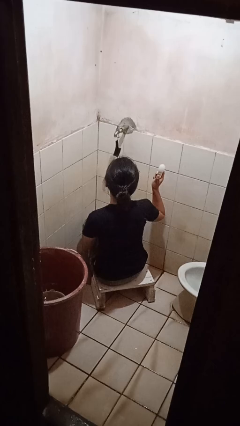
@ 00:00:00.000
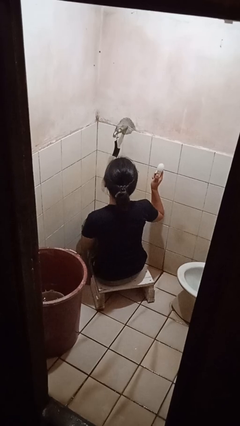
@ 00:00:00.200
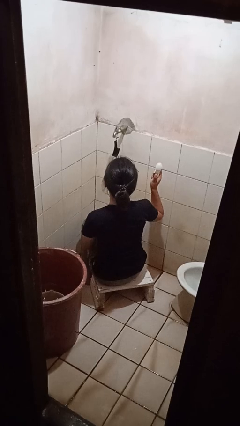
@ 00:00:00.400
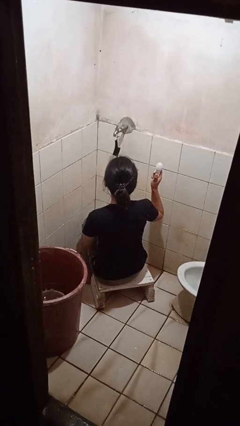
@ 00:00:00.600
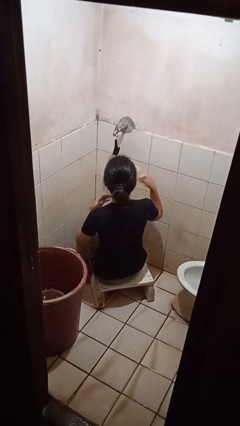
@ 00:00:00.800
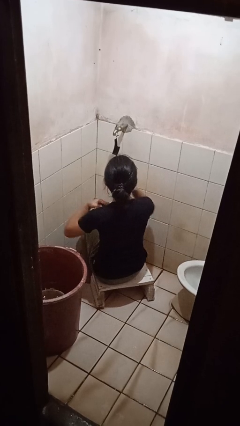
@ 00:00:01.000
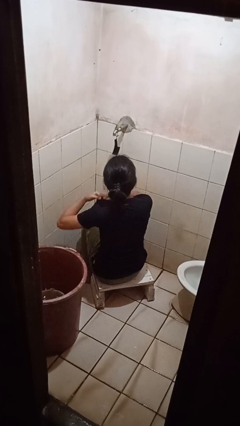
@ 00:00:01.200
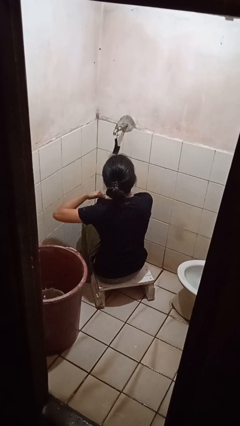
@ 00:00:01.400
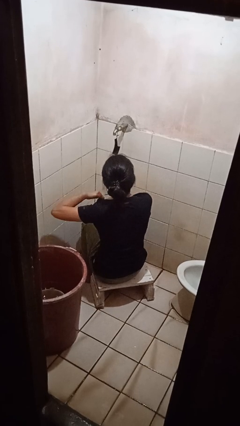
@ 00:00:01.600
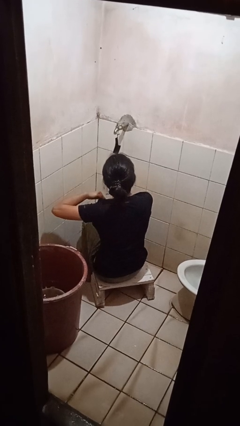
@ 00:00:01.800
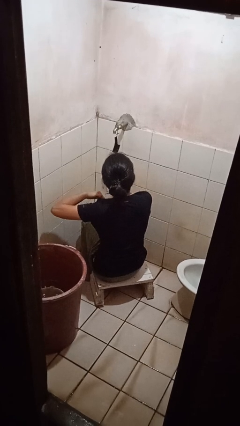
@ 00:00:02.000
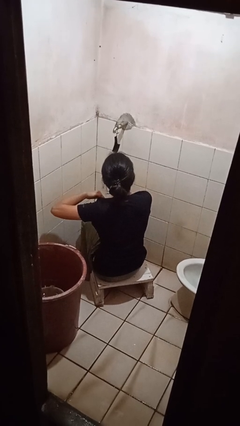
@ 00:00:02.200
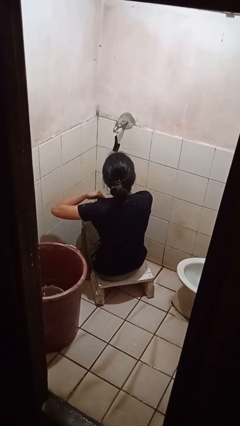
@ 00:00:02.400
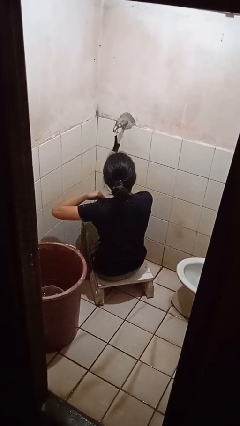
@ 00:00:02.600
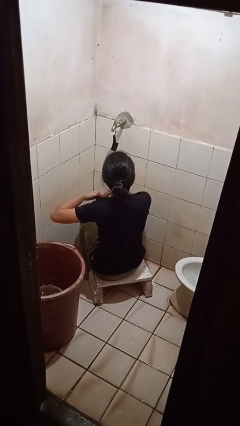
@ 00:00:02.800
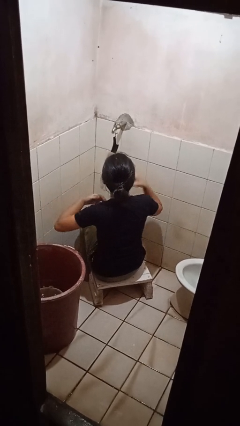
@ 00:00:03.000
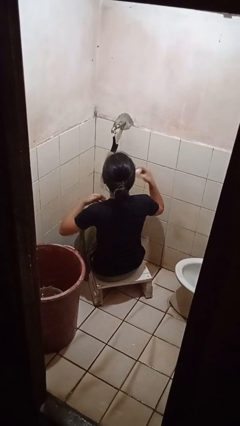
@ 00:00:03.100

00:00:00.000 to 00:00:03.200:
person applies deodorant

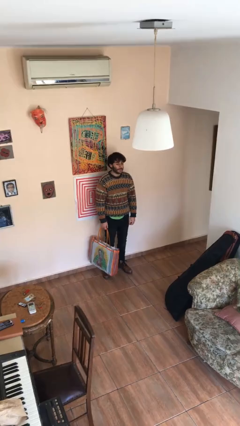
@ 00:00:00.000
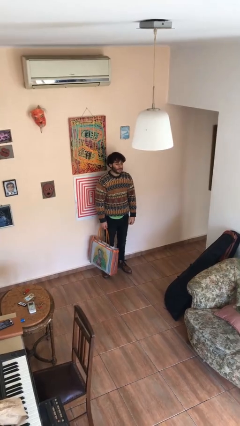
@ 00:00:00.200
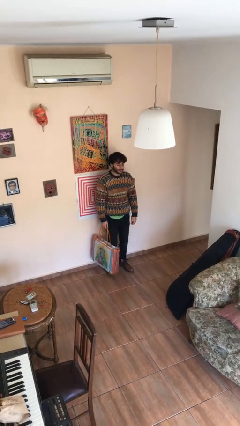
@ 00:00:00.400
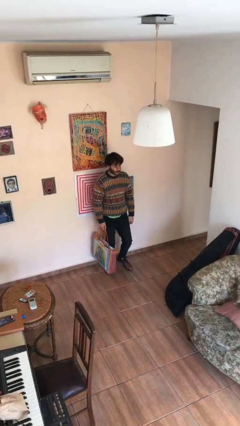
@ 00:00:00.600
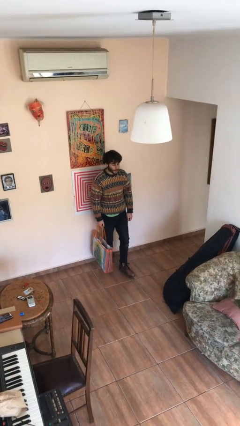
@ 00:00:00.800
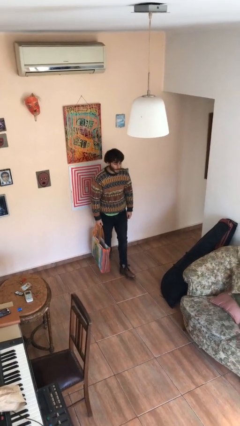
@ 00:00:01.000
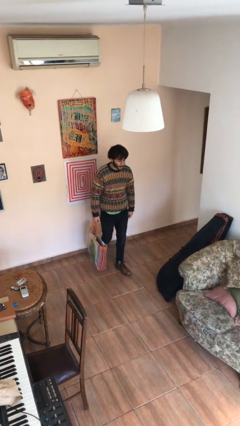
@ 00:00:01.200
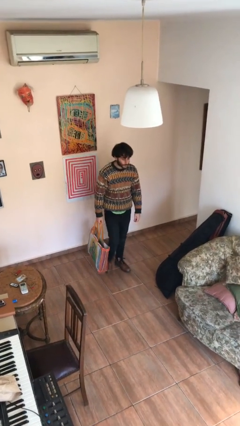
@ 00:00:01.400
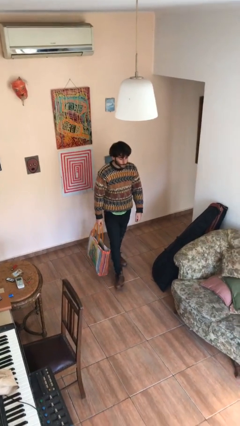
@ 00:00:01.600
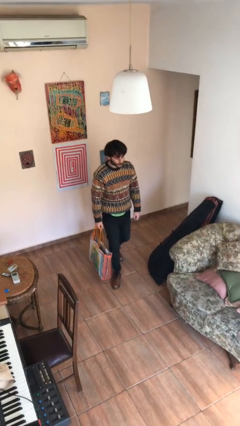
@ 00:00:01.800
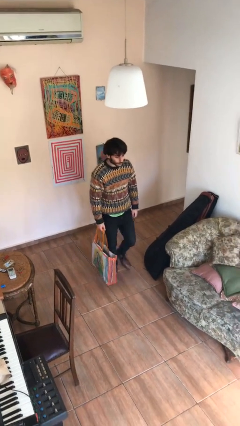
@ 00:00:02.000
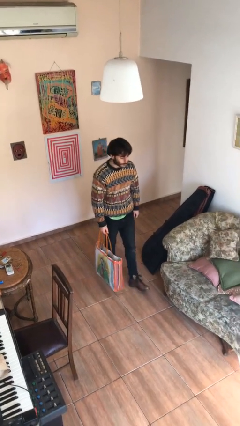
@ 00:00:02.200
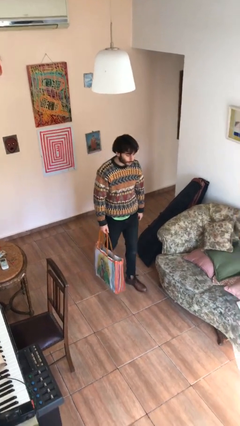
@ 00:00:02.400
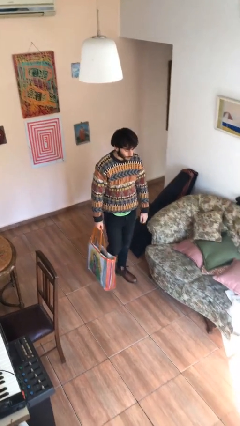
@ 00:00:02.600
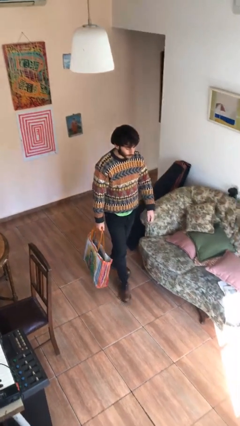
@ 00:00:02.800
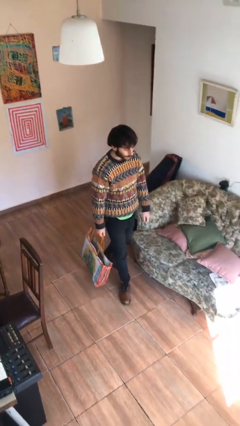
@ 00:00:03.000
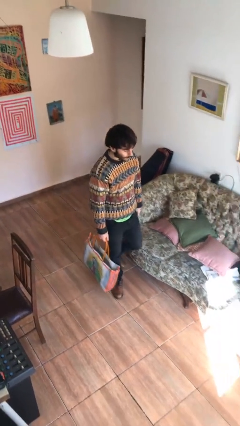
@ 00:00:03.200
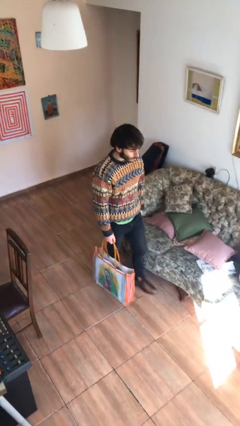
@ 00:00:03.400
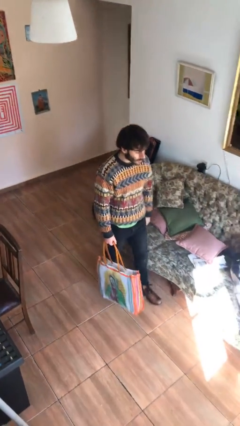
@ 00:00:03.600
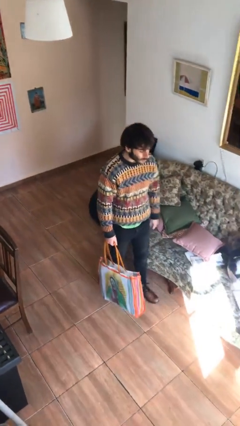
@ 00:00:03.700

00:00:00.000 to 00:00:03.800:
person carries groceries

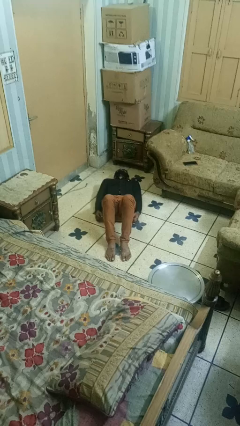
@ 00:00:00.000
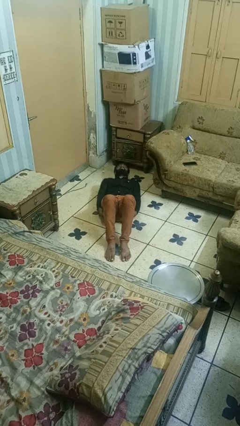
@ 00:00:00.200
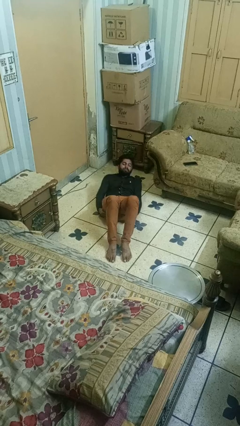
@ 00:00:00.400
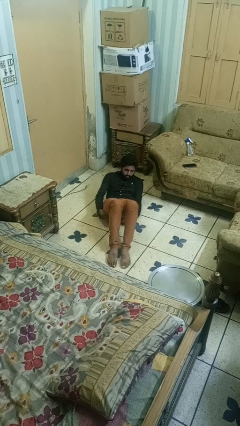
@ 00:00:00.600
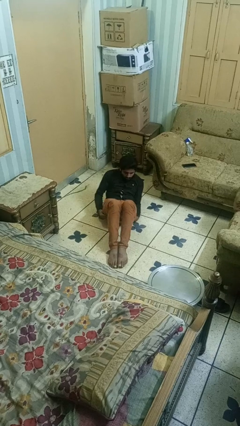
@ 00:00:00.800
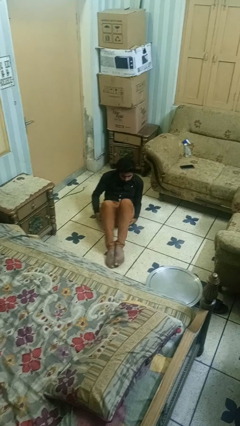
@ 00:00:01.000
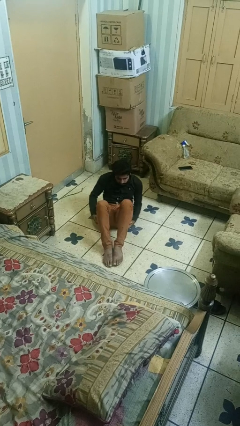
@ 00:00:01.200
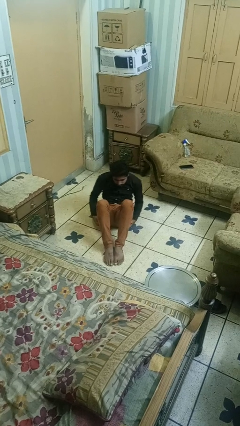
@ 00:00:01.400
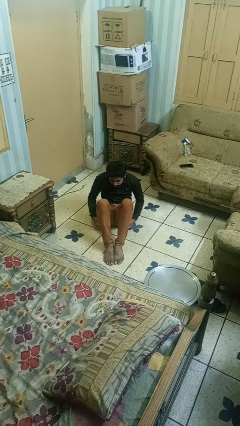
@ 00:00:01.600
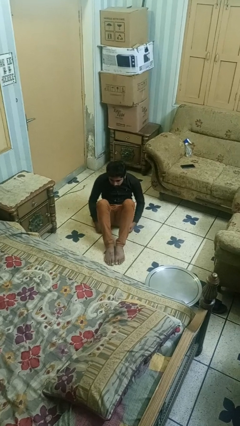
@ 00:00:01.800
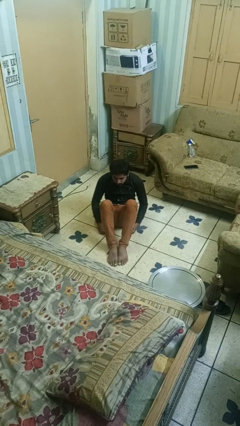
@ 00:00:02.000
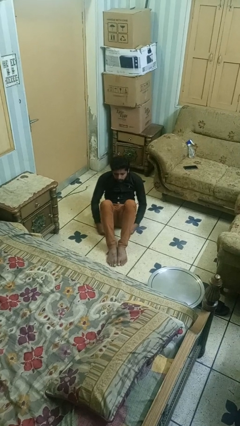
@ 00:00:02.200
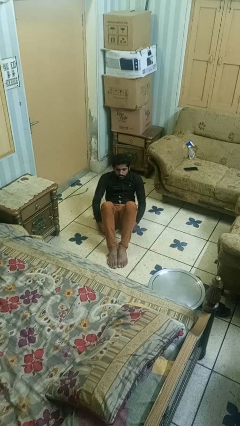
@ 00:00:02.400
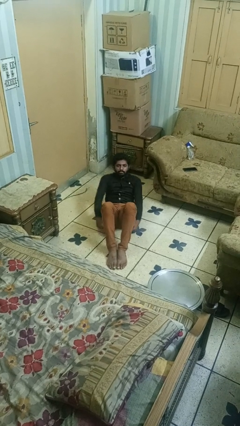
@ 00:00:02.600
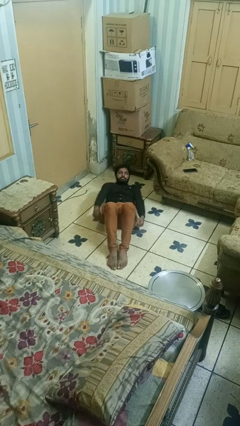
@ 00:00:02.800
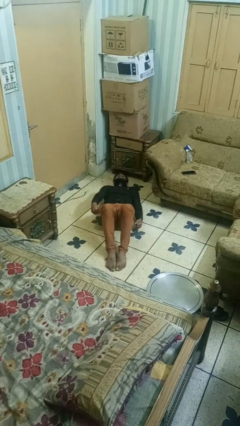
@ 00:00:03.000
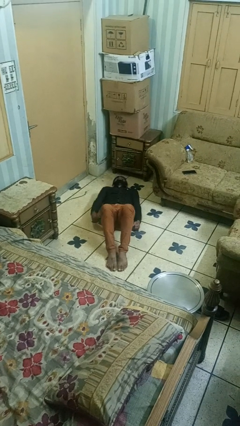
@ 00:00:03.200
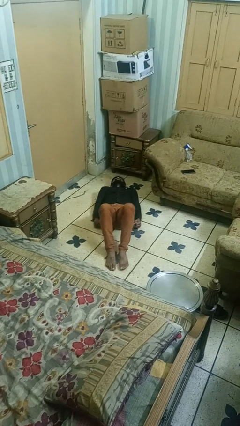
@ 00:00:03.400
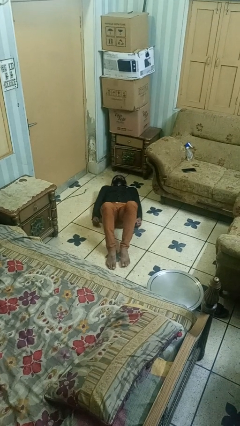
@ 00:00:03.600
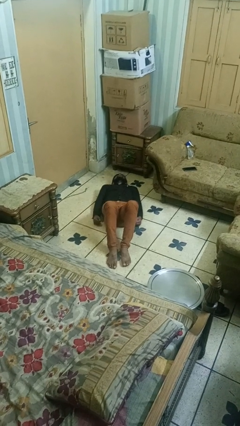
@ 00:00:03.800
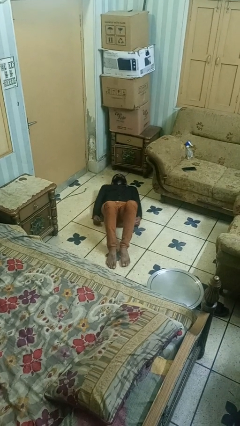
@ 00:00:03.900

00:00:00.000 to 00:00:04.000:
person exercises with situp

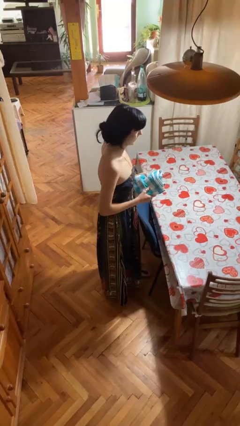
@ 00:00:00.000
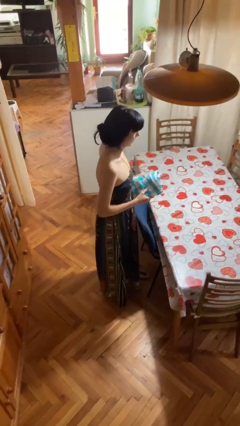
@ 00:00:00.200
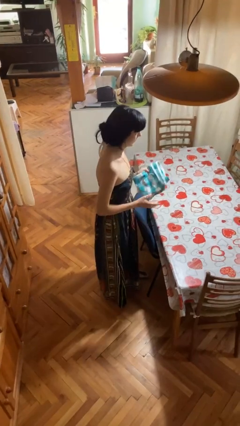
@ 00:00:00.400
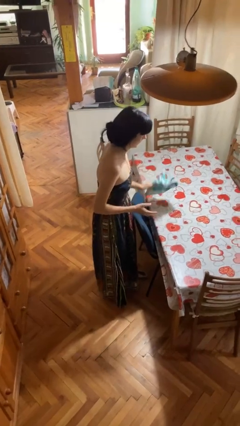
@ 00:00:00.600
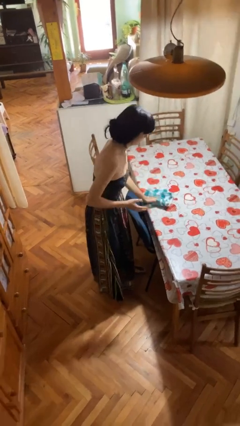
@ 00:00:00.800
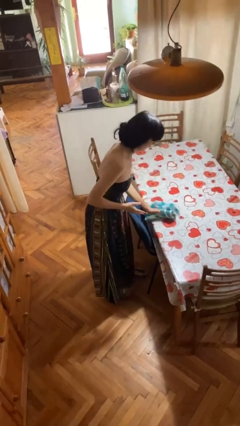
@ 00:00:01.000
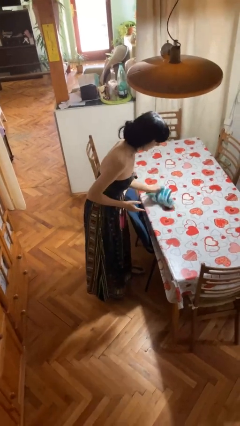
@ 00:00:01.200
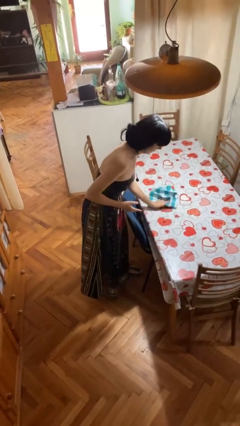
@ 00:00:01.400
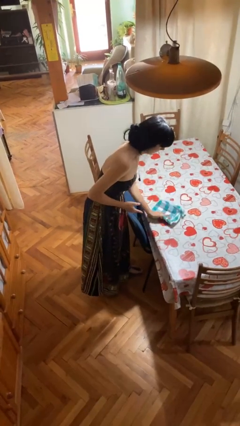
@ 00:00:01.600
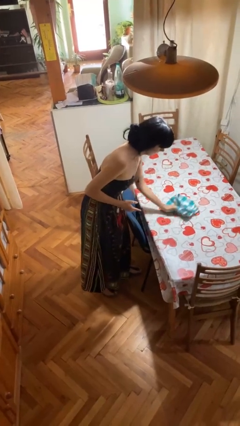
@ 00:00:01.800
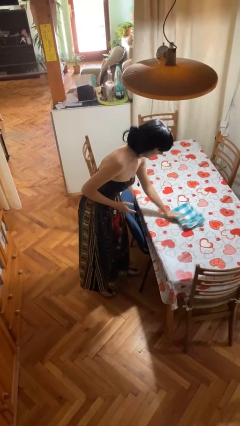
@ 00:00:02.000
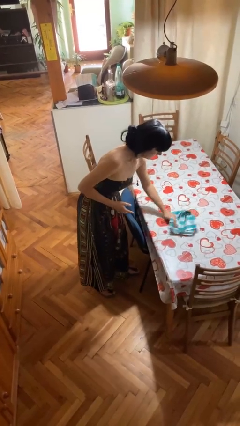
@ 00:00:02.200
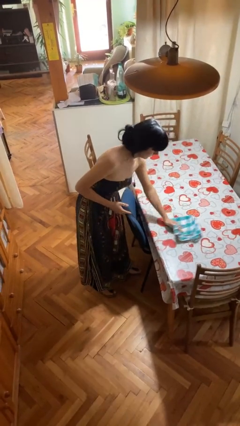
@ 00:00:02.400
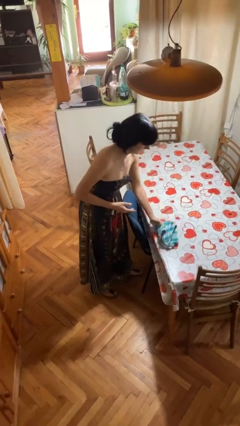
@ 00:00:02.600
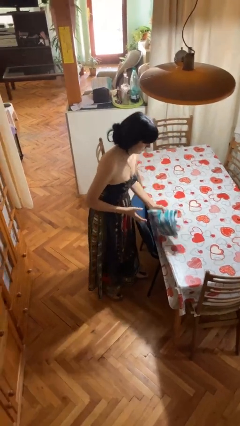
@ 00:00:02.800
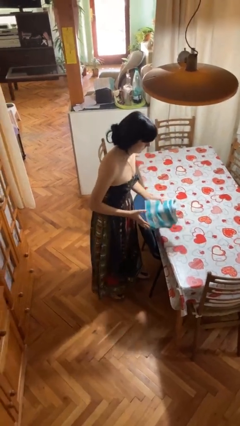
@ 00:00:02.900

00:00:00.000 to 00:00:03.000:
person cleans table with rag

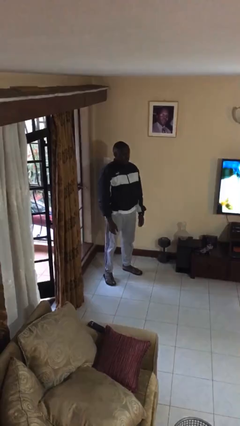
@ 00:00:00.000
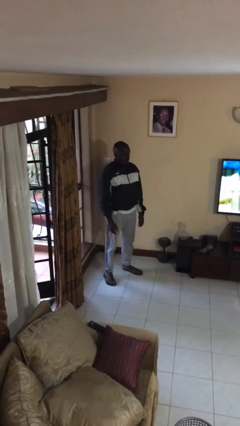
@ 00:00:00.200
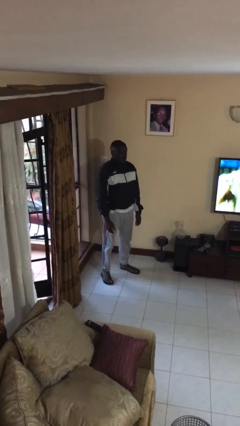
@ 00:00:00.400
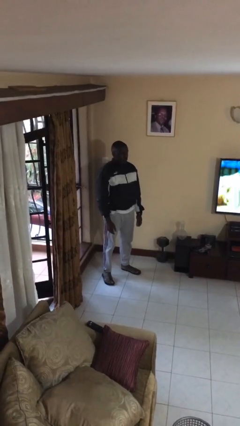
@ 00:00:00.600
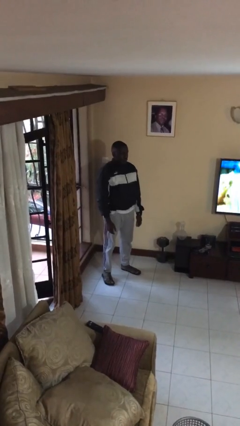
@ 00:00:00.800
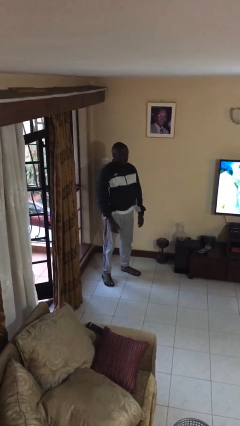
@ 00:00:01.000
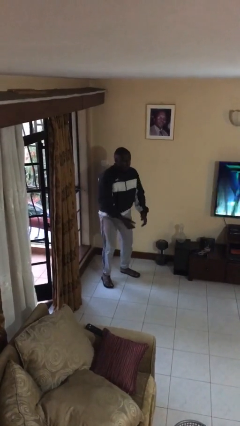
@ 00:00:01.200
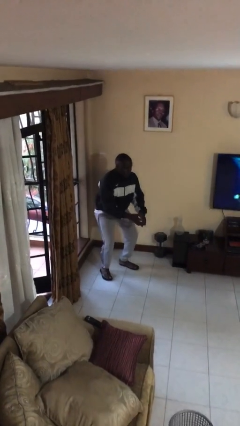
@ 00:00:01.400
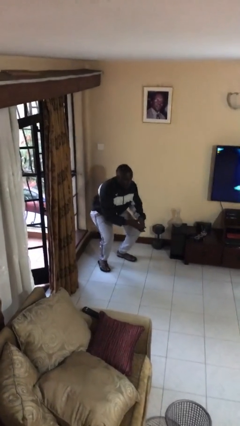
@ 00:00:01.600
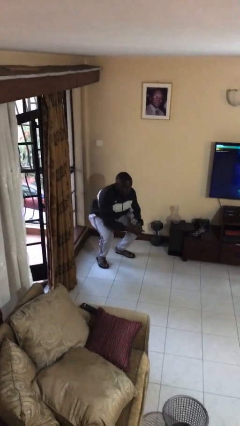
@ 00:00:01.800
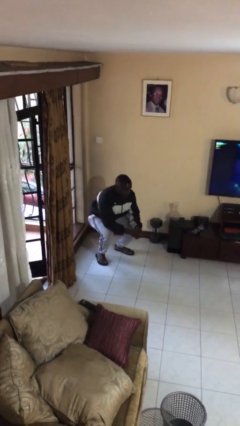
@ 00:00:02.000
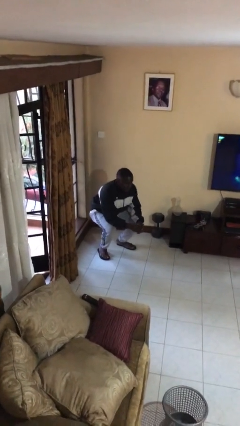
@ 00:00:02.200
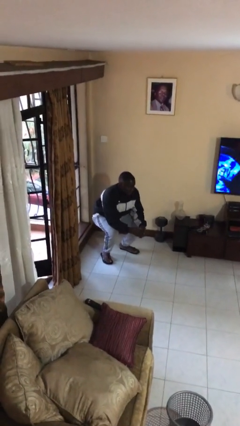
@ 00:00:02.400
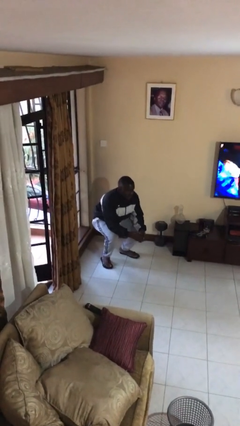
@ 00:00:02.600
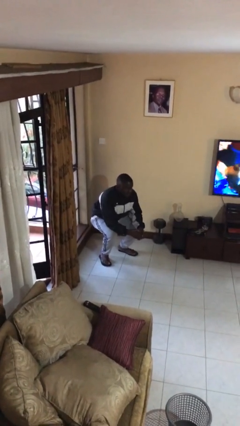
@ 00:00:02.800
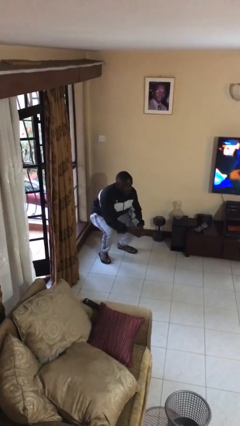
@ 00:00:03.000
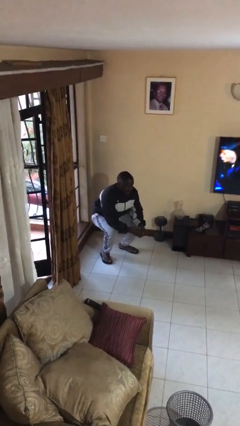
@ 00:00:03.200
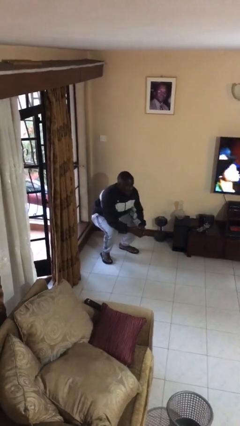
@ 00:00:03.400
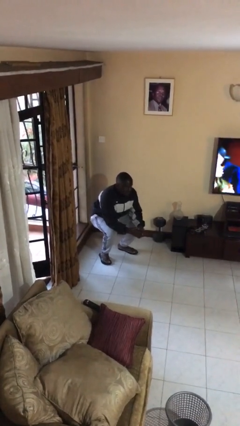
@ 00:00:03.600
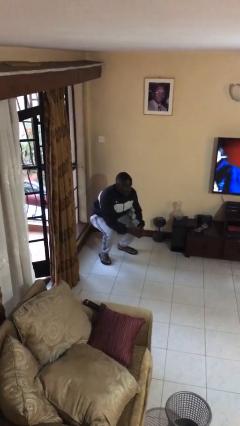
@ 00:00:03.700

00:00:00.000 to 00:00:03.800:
person squats
